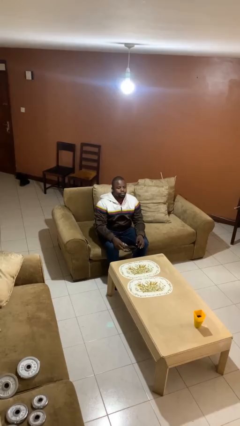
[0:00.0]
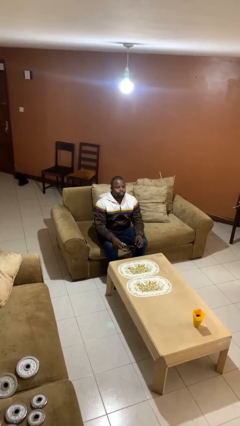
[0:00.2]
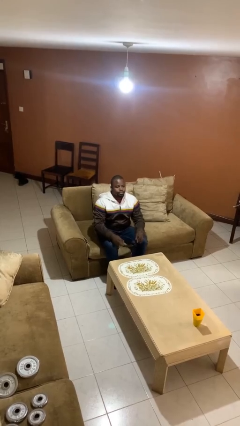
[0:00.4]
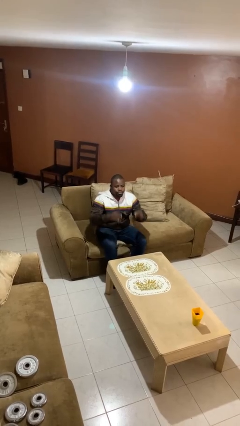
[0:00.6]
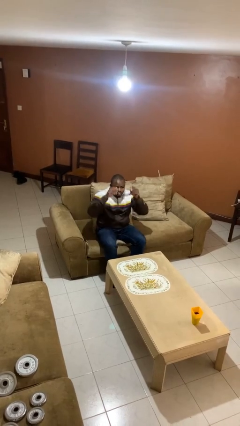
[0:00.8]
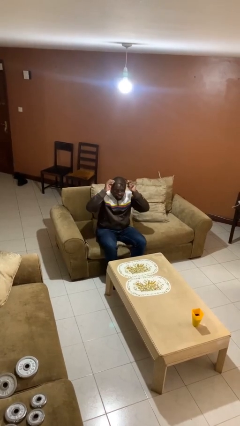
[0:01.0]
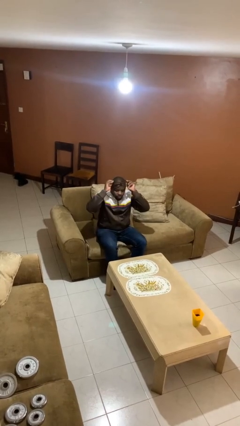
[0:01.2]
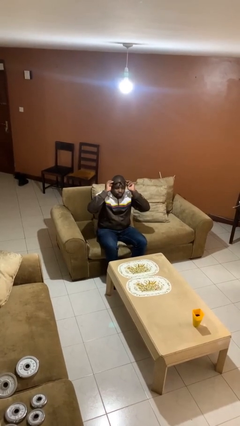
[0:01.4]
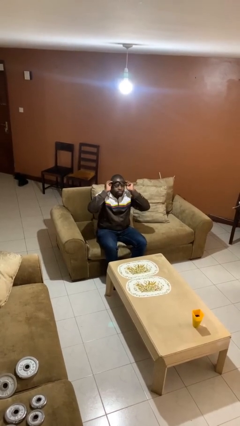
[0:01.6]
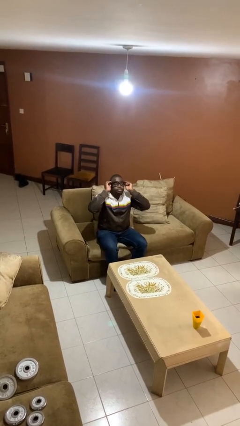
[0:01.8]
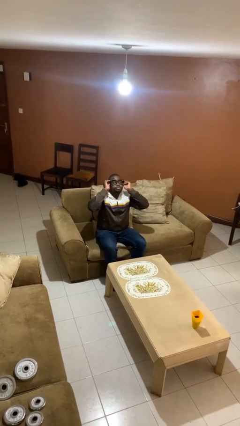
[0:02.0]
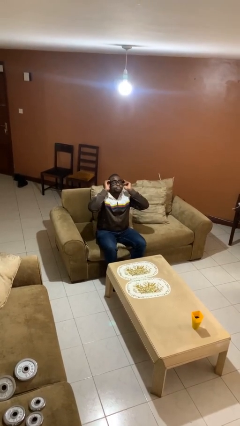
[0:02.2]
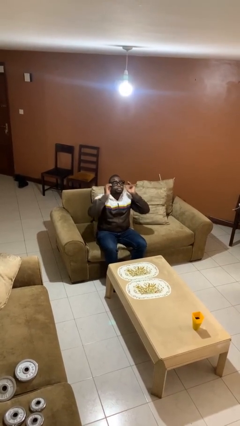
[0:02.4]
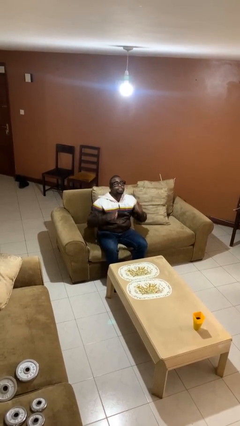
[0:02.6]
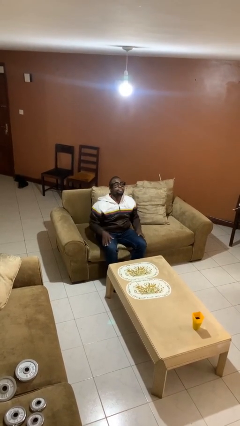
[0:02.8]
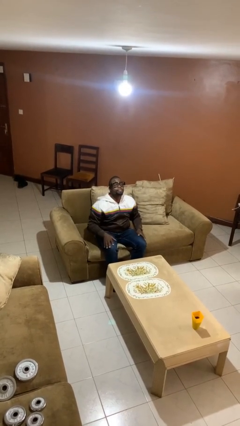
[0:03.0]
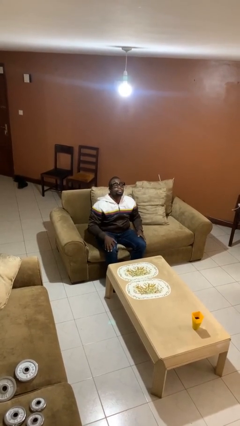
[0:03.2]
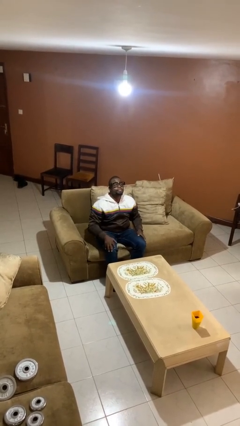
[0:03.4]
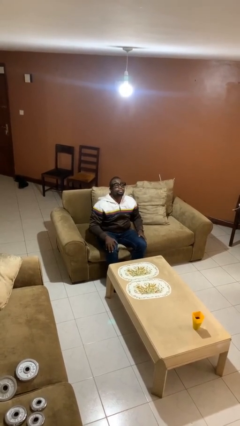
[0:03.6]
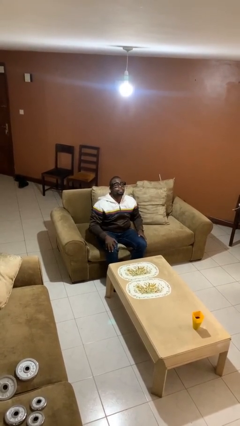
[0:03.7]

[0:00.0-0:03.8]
person puts on glasses

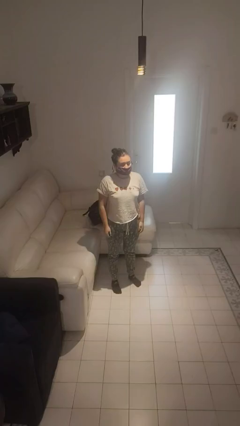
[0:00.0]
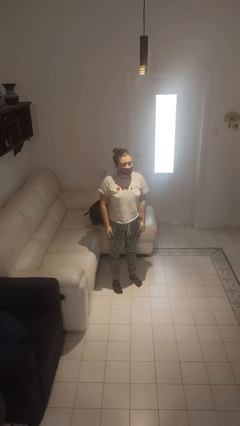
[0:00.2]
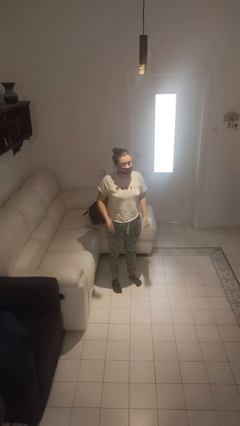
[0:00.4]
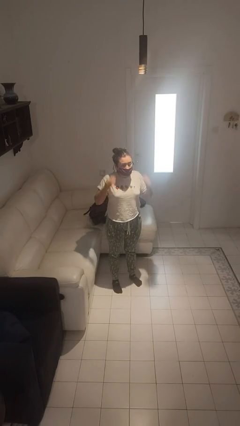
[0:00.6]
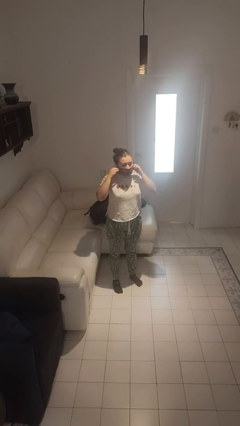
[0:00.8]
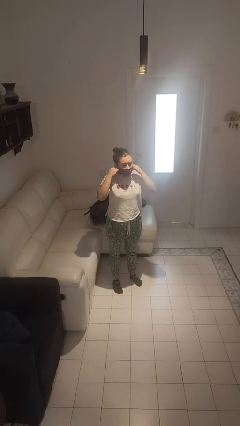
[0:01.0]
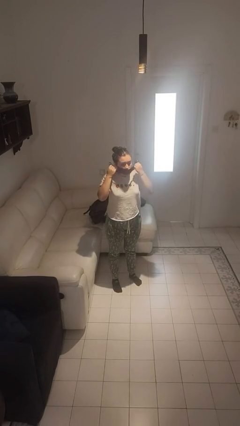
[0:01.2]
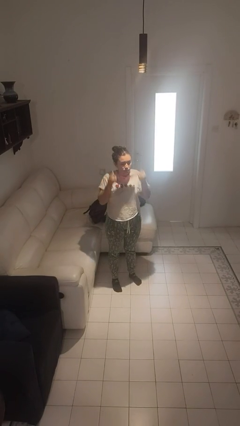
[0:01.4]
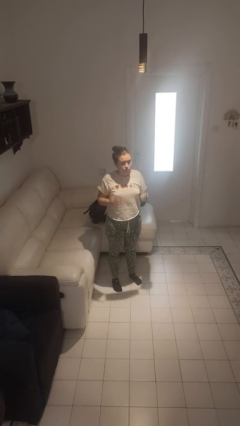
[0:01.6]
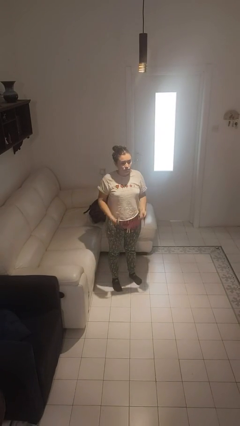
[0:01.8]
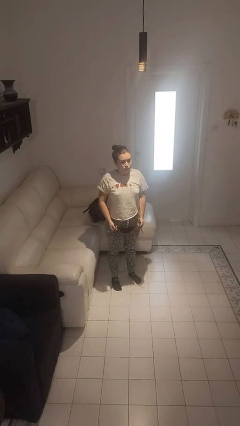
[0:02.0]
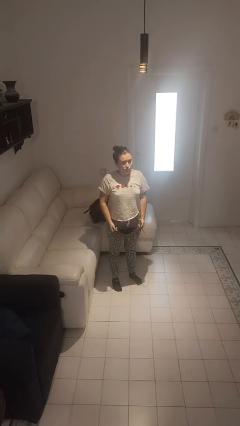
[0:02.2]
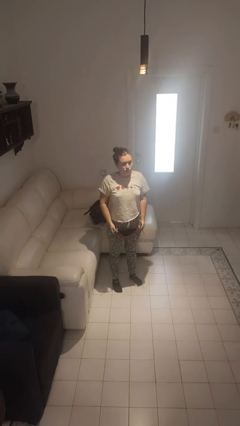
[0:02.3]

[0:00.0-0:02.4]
person takes off facemask

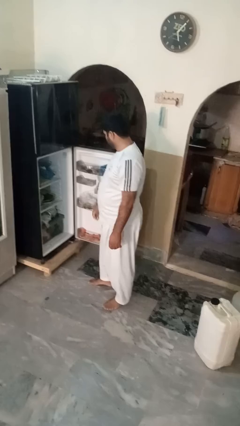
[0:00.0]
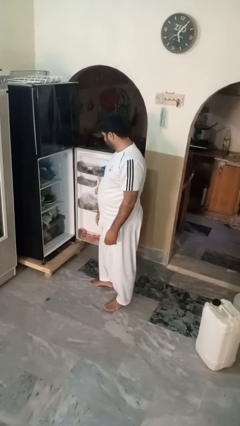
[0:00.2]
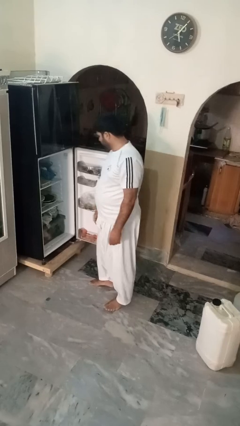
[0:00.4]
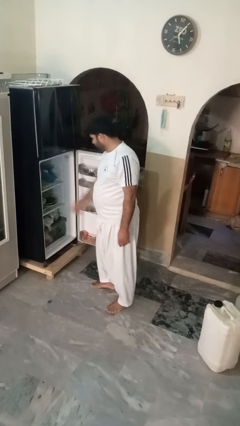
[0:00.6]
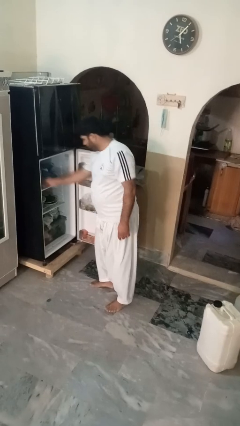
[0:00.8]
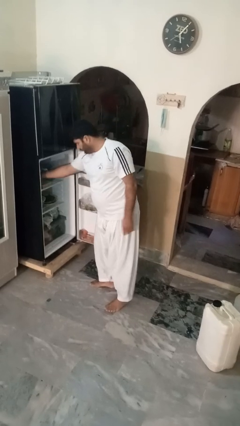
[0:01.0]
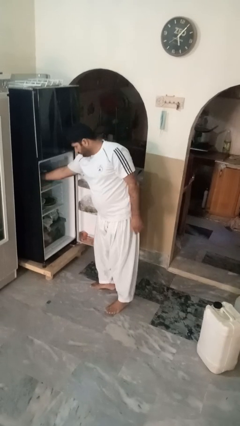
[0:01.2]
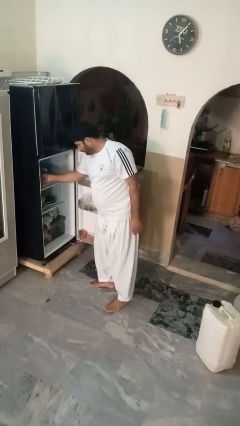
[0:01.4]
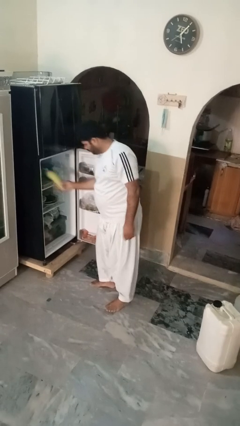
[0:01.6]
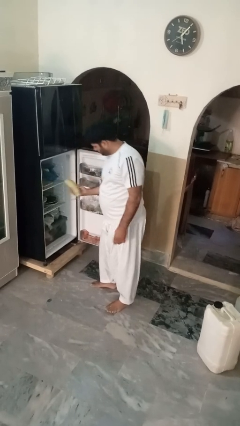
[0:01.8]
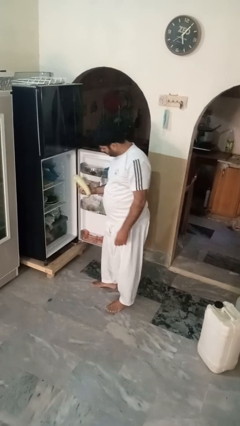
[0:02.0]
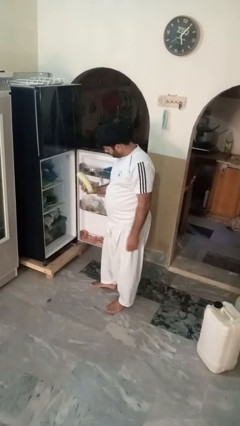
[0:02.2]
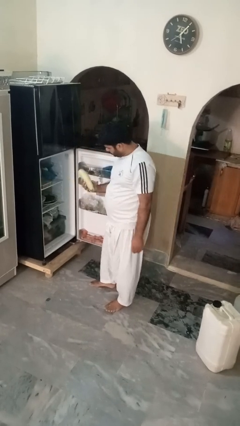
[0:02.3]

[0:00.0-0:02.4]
person takes object from refrigerator

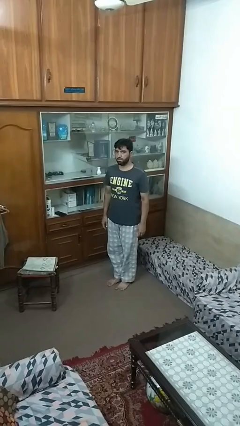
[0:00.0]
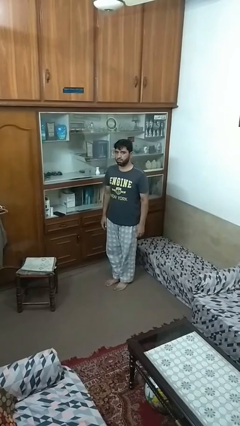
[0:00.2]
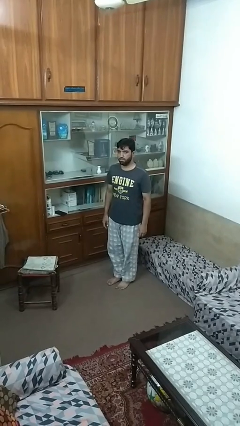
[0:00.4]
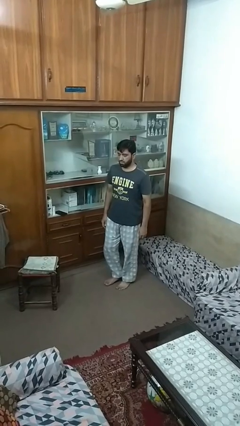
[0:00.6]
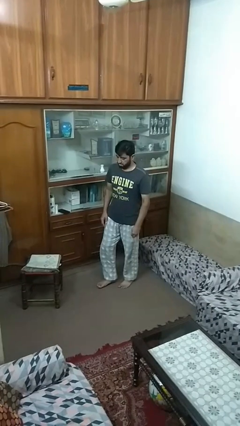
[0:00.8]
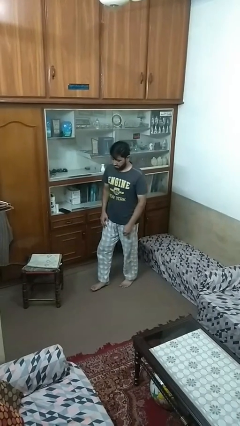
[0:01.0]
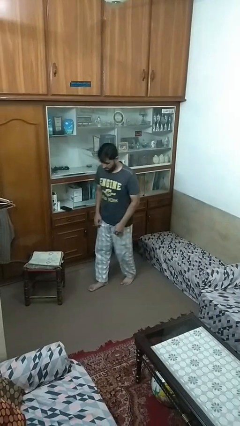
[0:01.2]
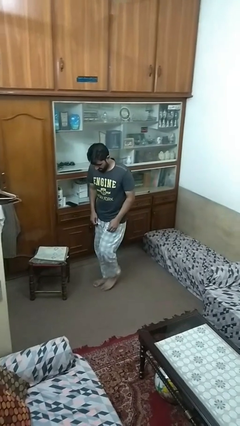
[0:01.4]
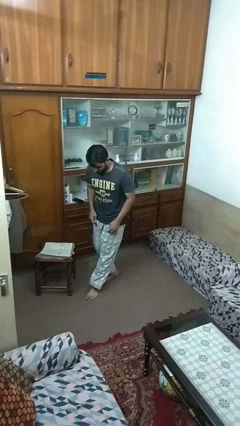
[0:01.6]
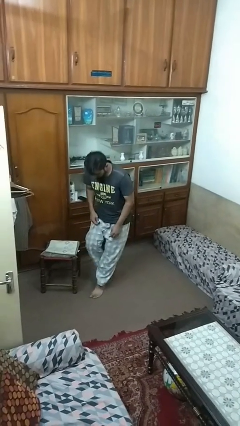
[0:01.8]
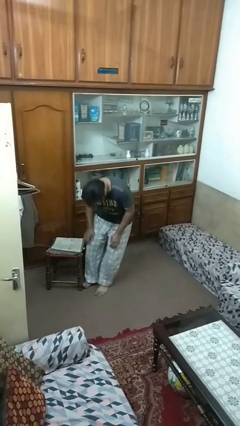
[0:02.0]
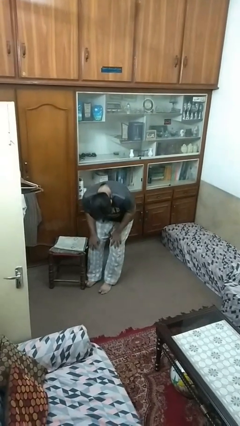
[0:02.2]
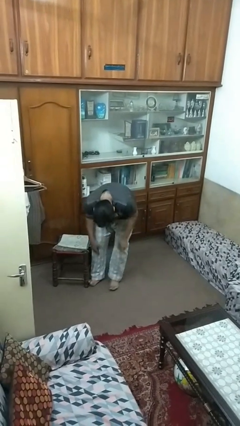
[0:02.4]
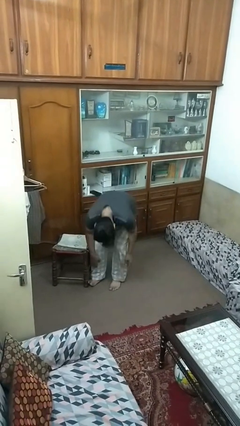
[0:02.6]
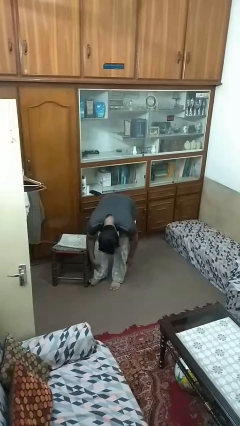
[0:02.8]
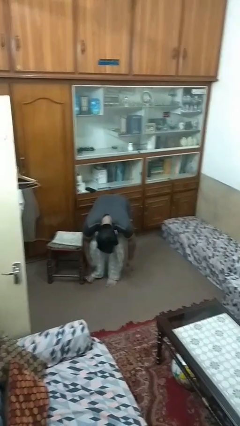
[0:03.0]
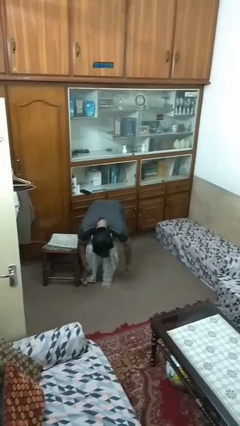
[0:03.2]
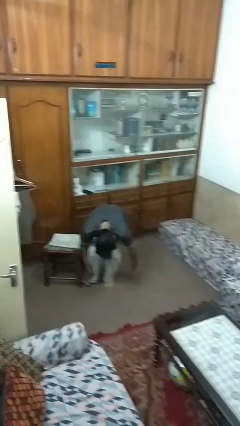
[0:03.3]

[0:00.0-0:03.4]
person trips on object on floor

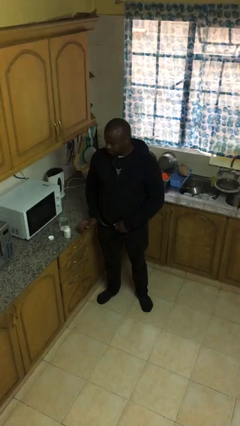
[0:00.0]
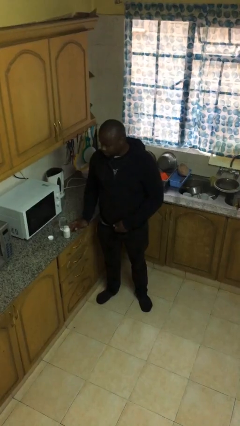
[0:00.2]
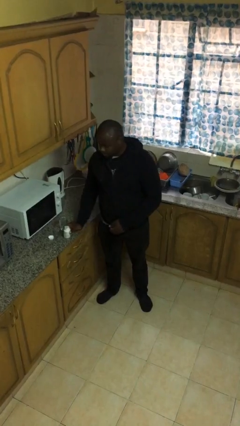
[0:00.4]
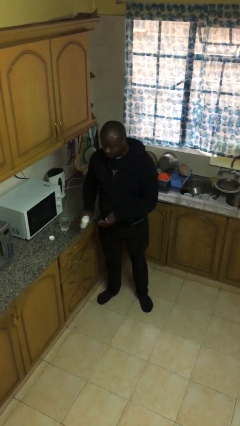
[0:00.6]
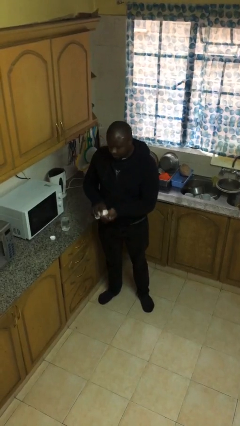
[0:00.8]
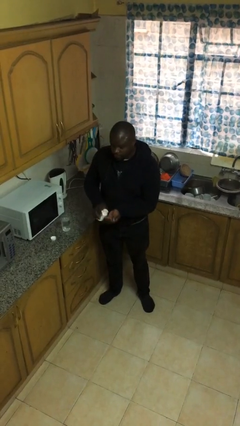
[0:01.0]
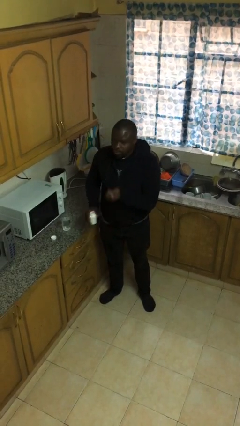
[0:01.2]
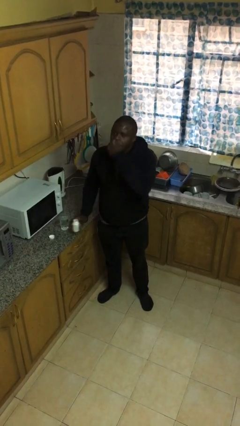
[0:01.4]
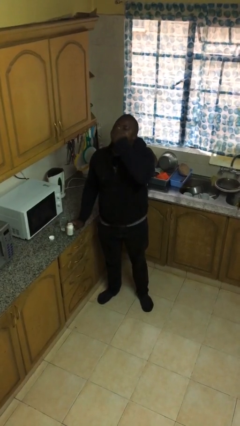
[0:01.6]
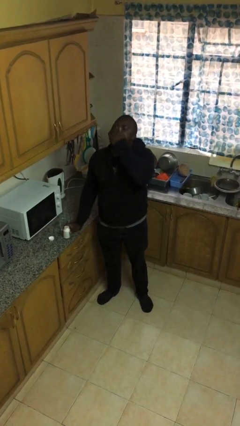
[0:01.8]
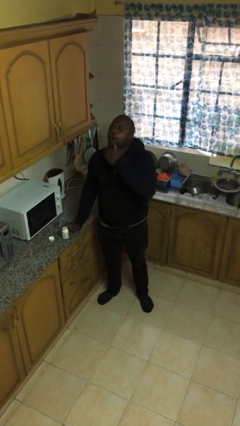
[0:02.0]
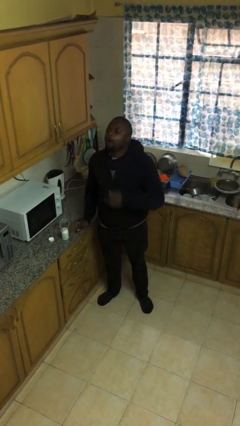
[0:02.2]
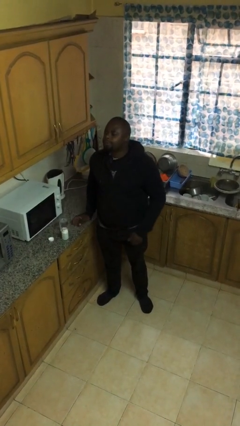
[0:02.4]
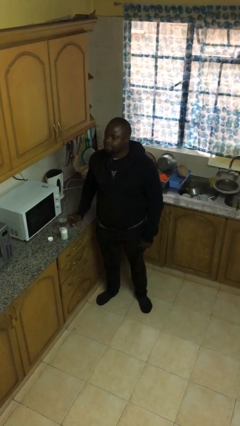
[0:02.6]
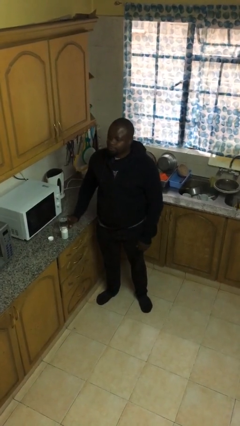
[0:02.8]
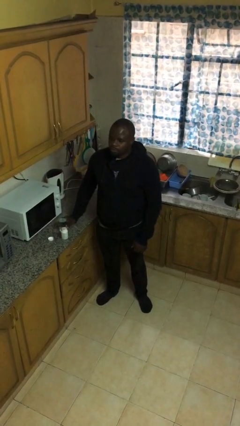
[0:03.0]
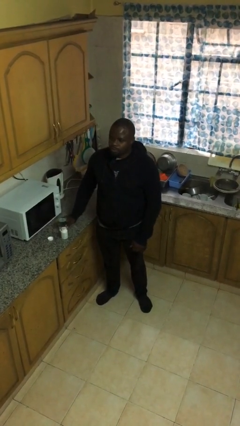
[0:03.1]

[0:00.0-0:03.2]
person takes medicine pills

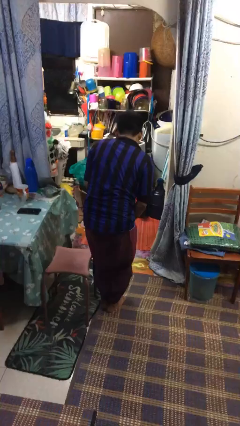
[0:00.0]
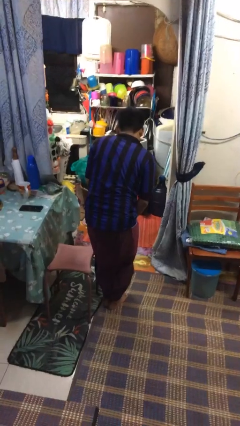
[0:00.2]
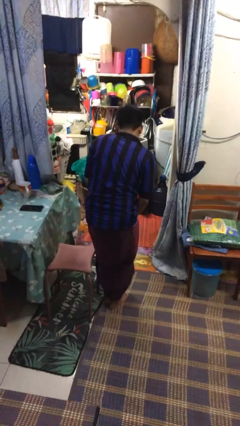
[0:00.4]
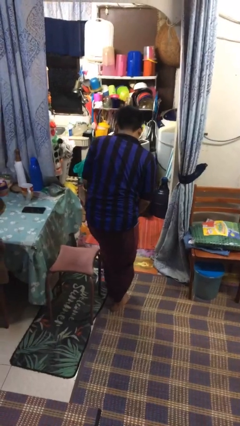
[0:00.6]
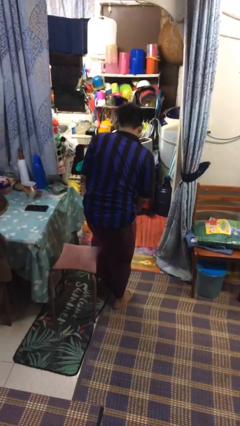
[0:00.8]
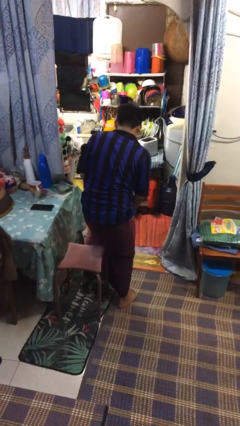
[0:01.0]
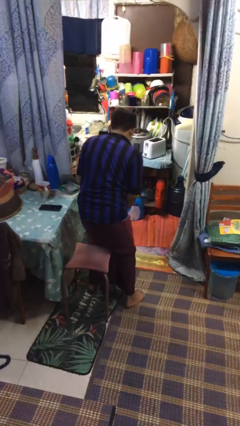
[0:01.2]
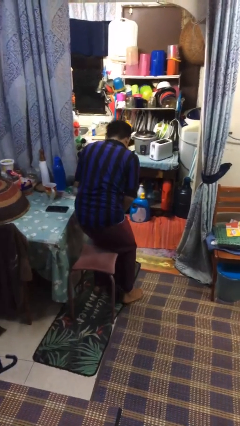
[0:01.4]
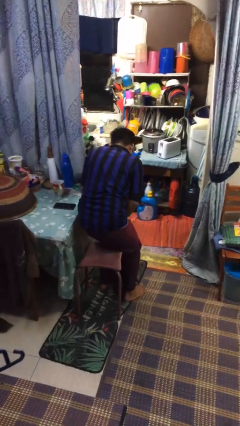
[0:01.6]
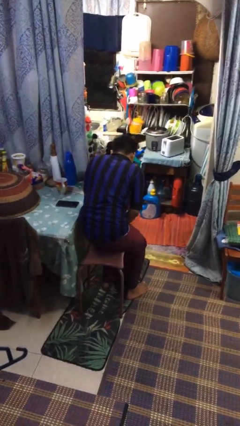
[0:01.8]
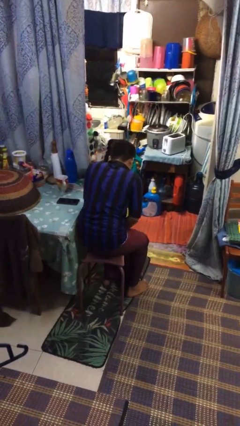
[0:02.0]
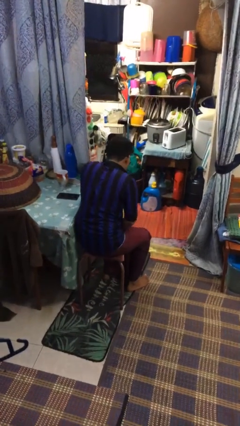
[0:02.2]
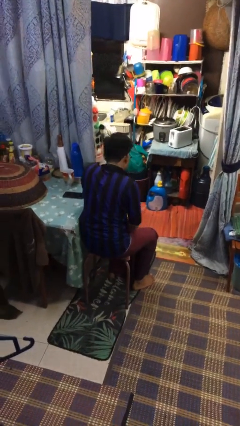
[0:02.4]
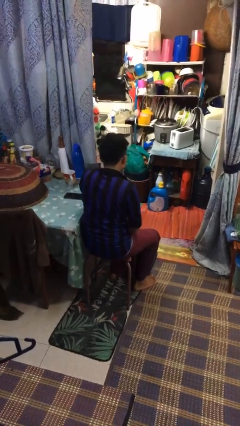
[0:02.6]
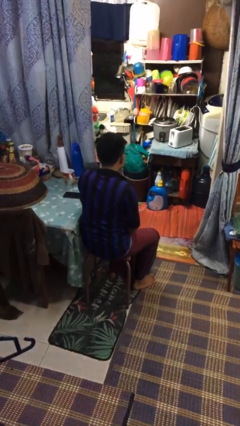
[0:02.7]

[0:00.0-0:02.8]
person sits down
